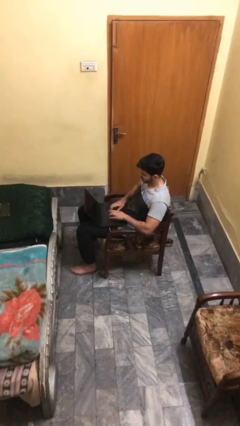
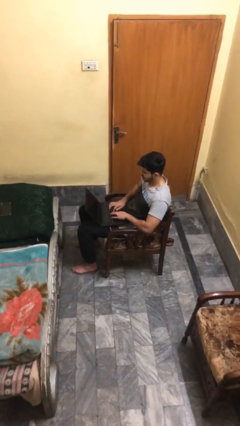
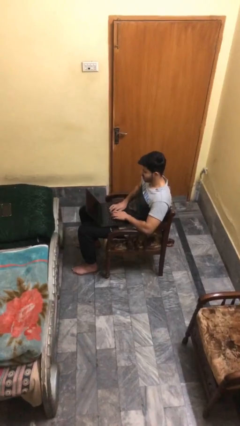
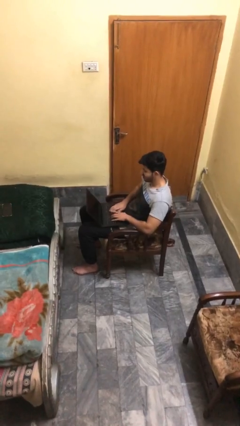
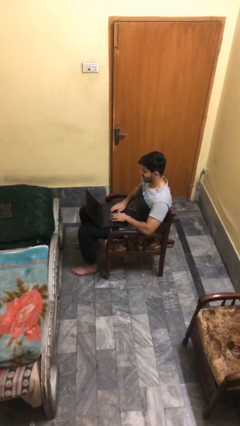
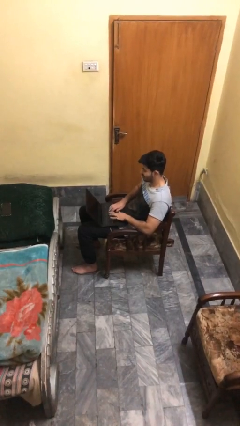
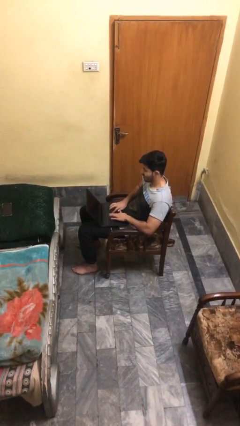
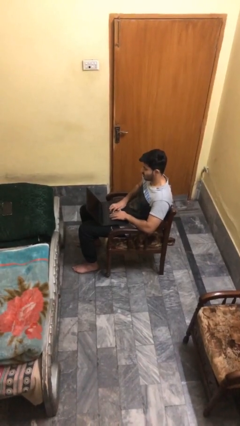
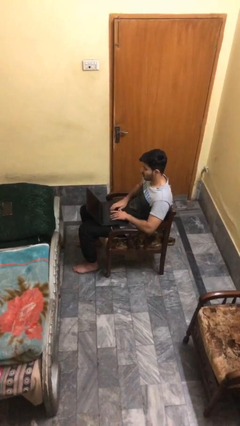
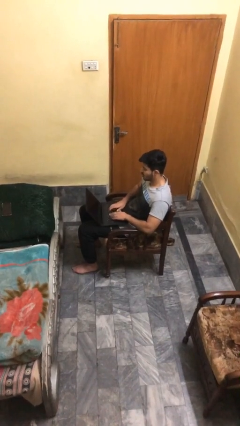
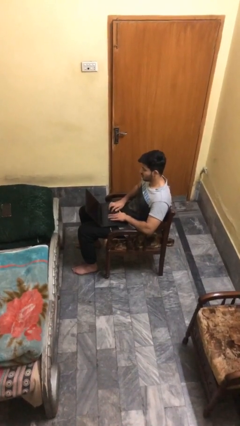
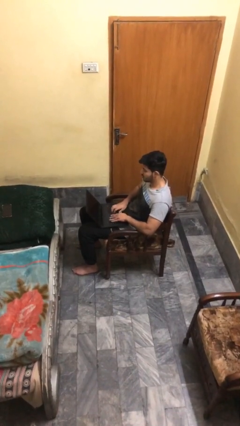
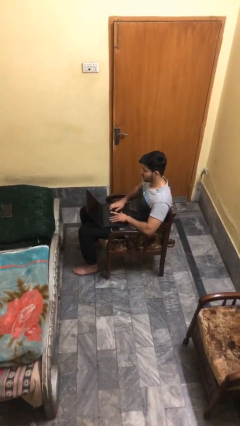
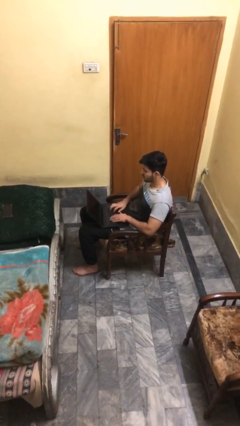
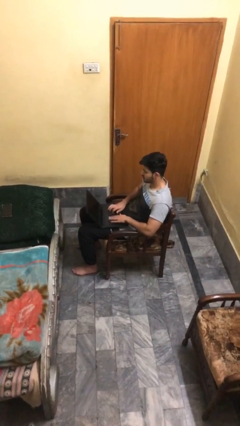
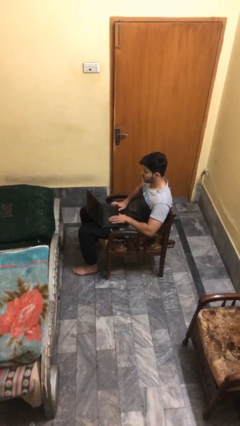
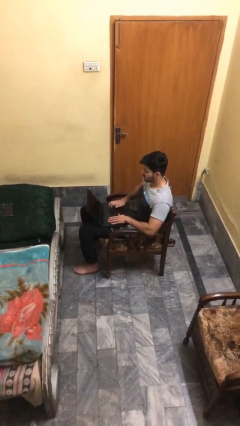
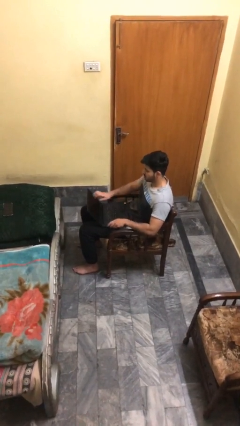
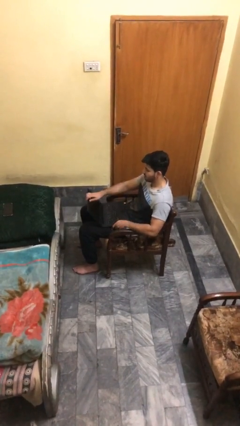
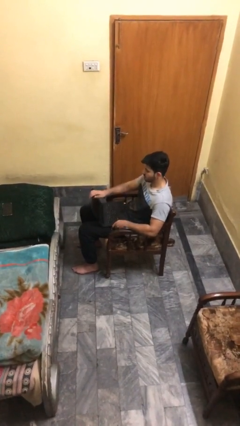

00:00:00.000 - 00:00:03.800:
person interacts with laptop

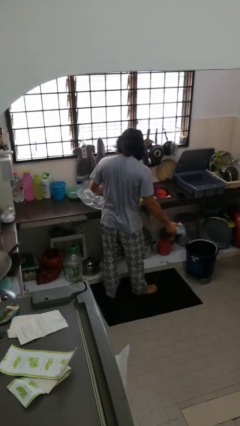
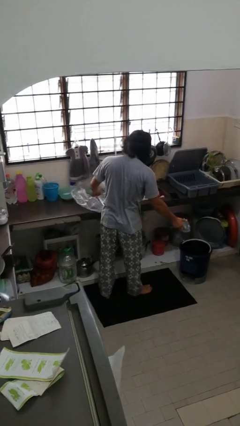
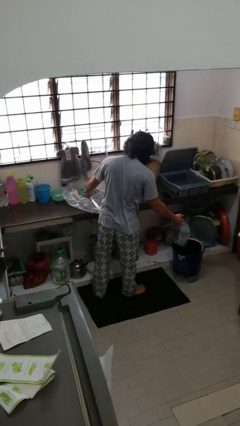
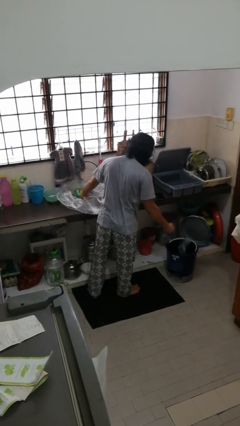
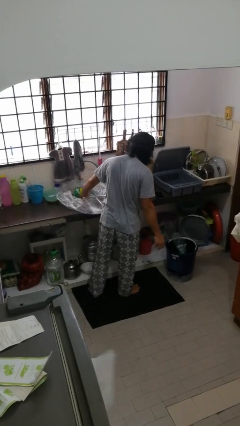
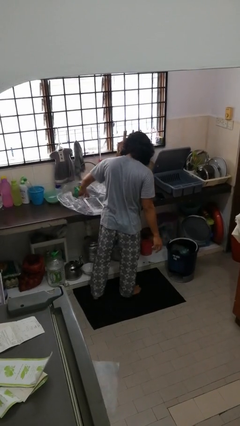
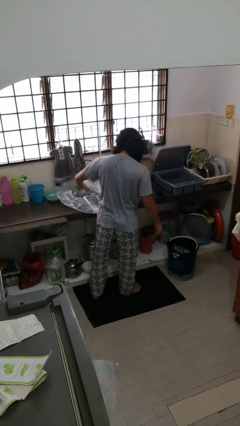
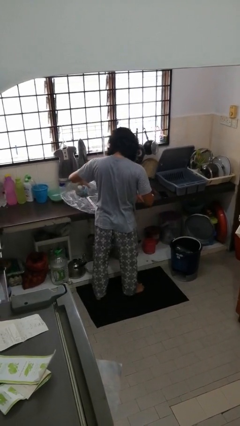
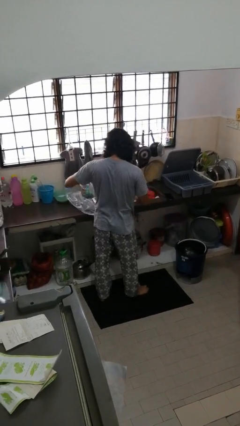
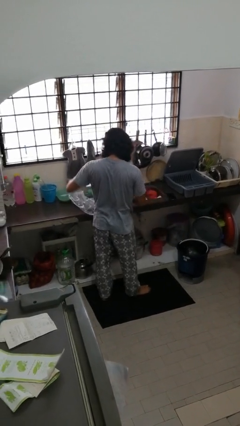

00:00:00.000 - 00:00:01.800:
person discards trash

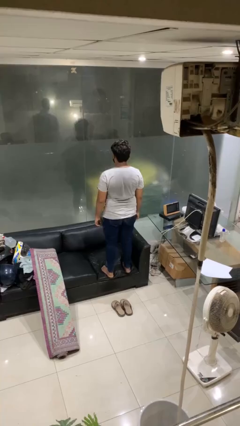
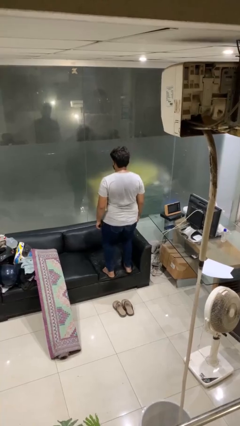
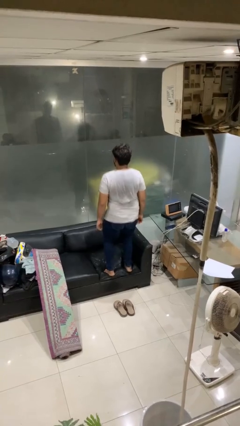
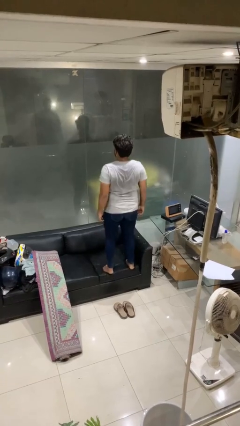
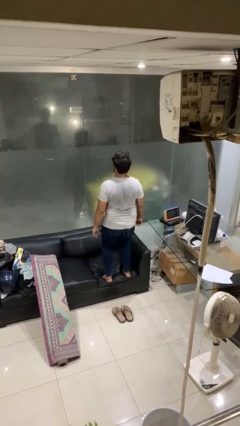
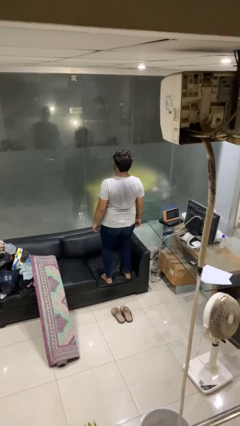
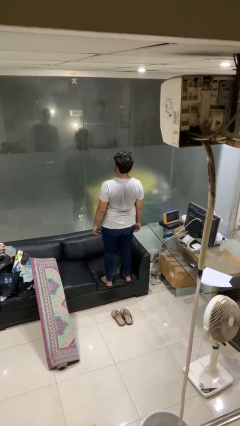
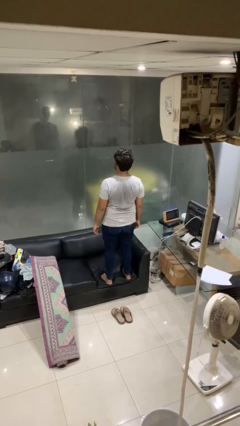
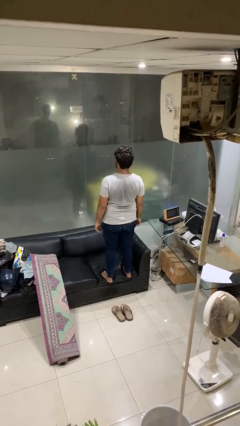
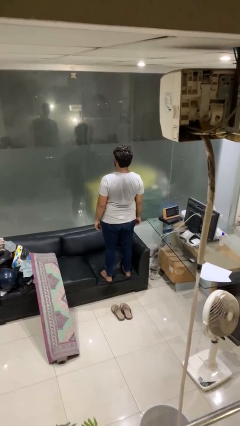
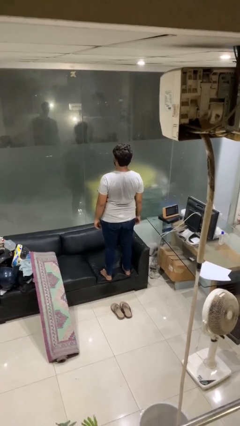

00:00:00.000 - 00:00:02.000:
person jumps on couch

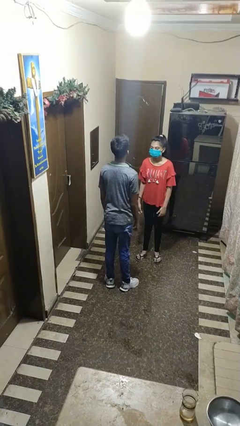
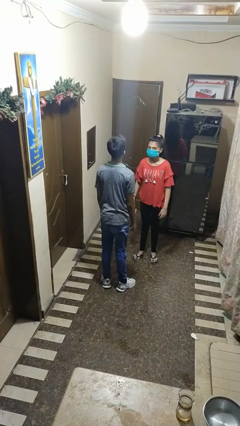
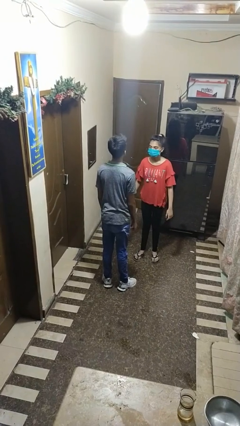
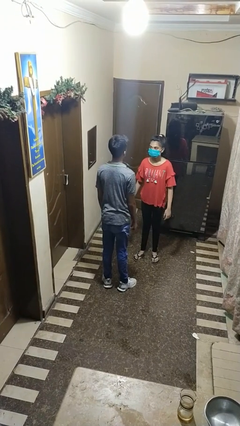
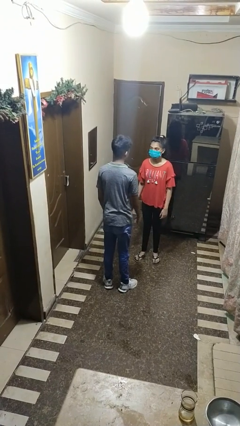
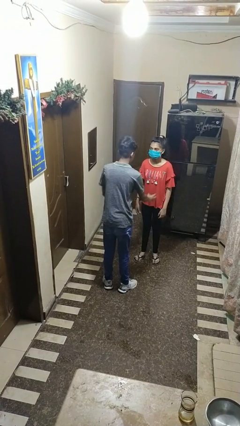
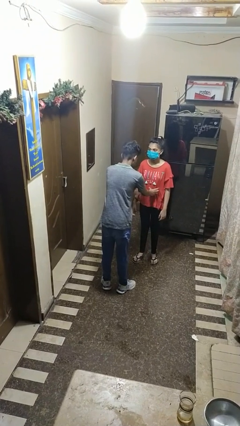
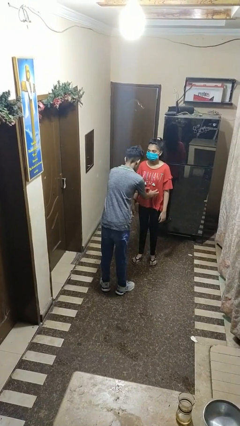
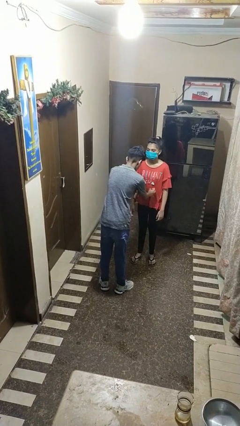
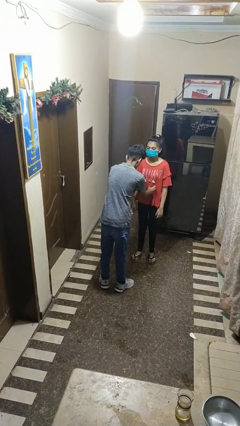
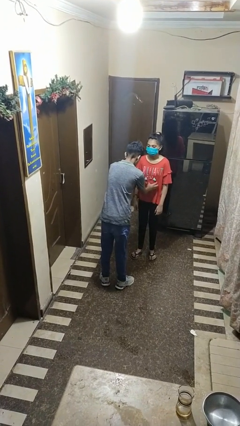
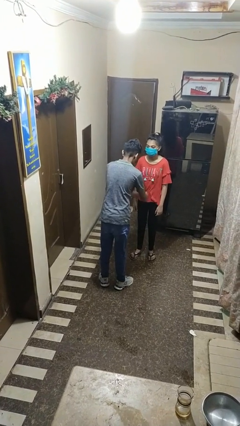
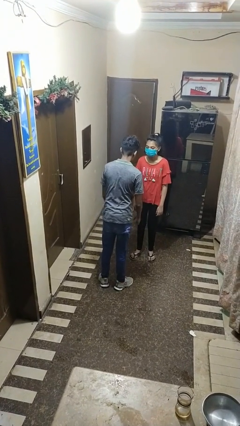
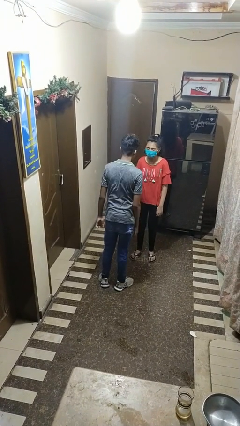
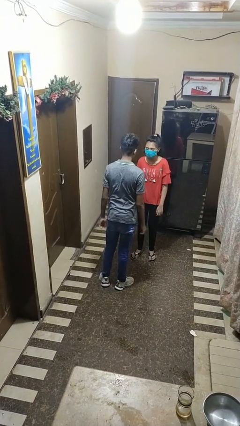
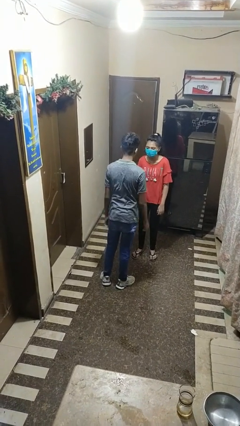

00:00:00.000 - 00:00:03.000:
person tickles person

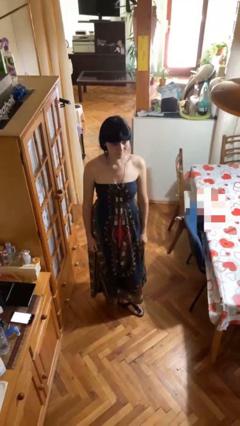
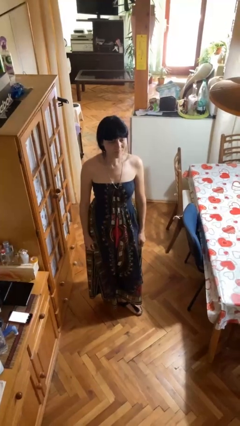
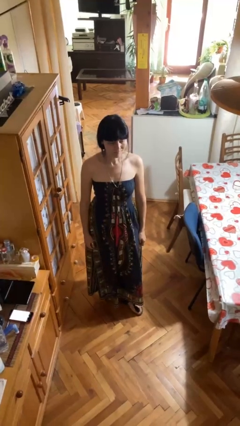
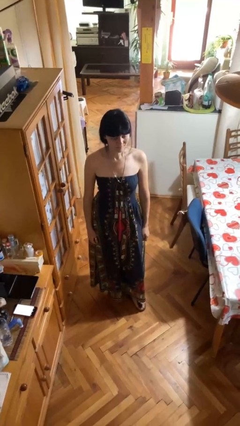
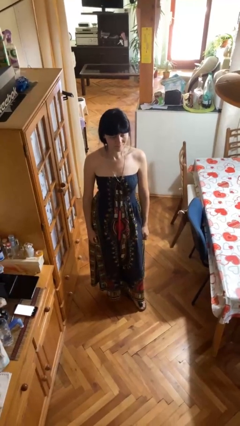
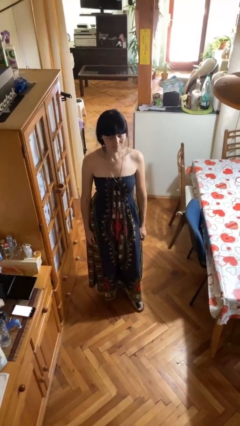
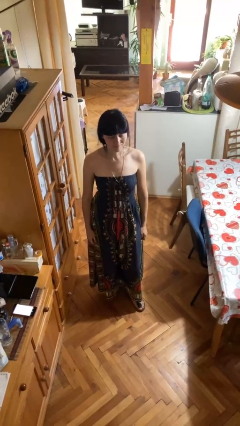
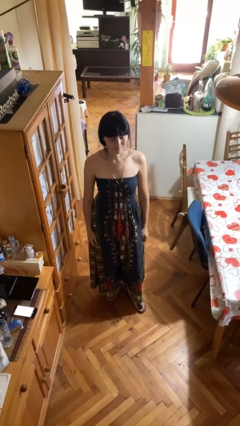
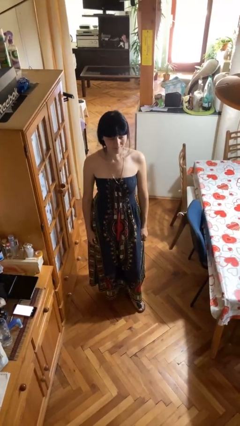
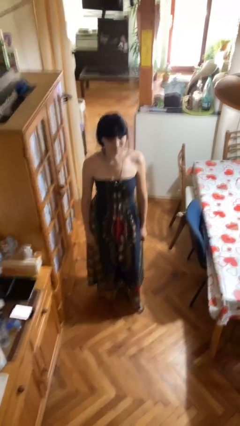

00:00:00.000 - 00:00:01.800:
person nods head

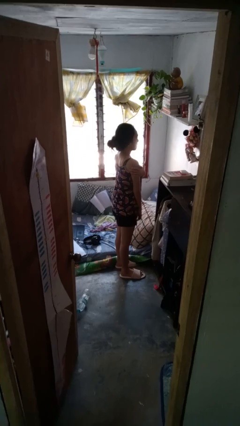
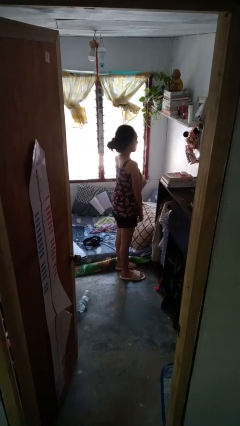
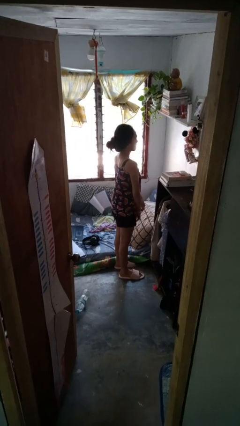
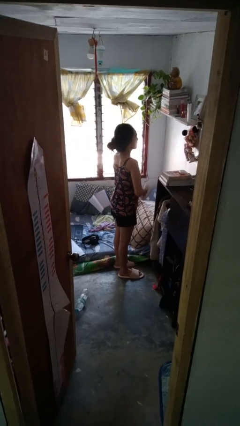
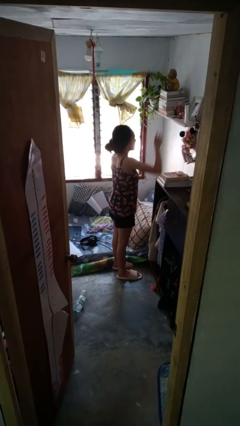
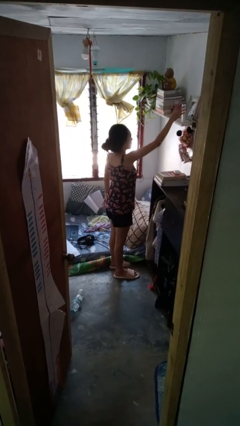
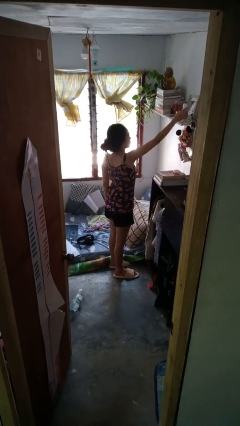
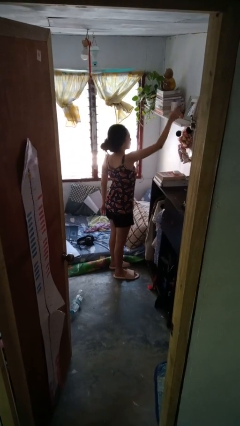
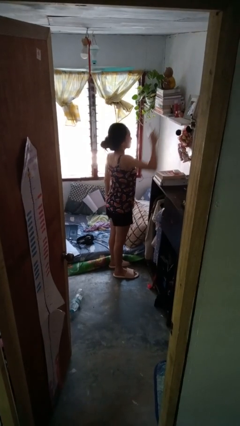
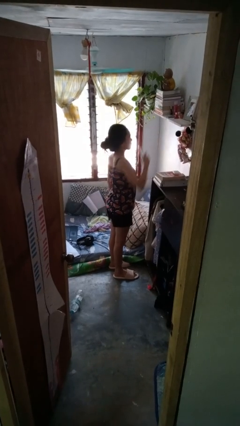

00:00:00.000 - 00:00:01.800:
person picks up object from shelf

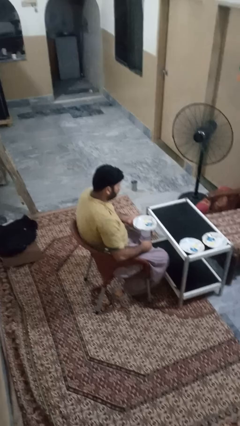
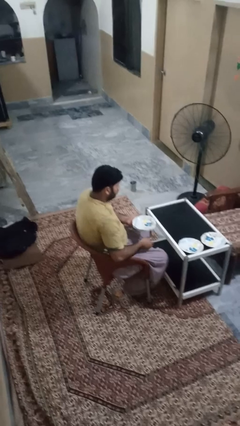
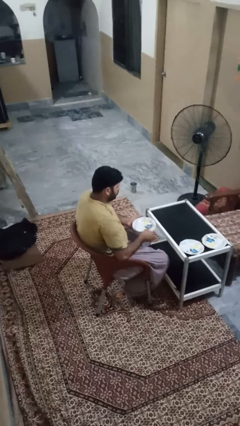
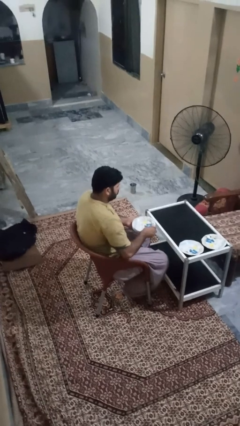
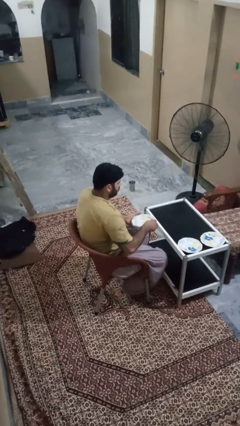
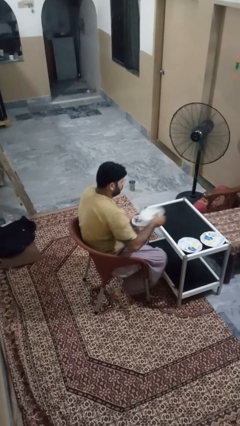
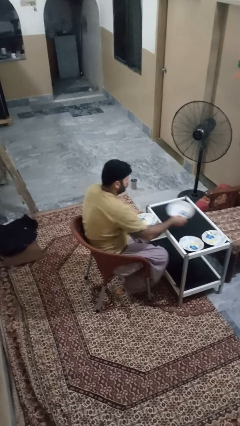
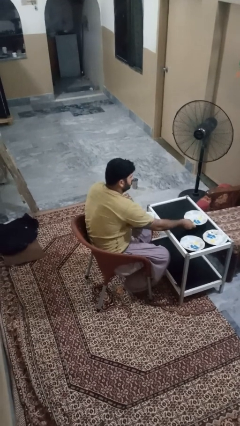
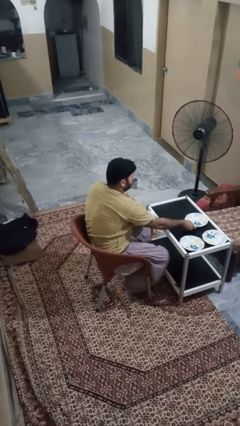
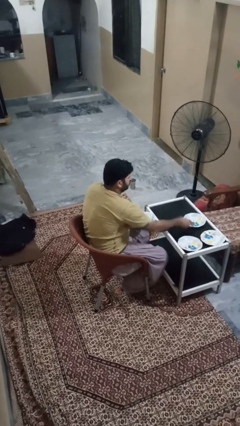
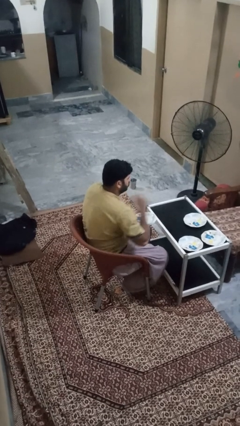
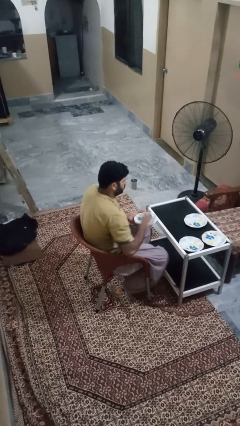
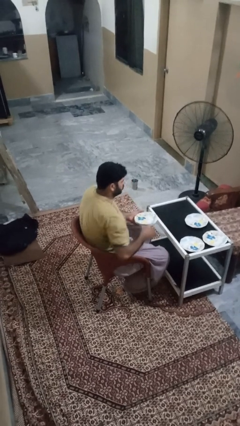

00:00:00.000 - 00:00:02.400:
person sets table

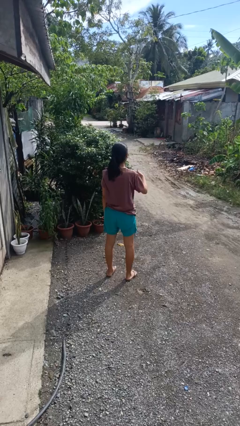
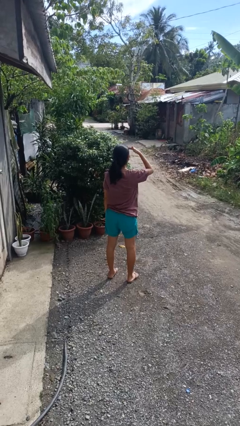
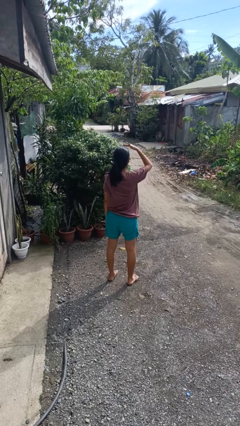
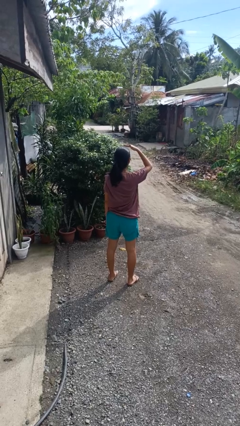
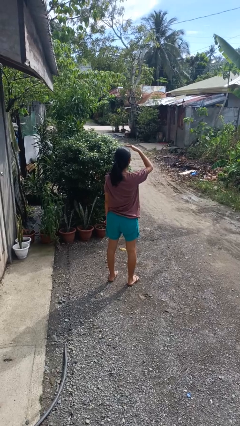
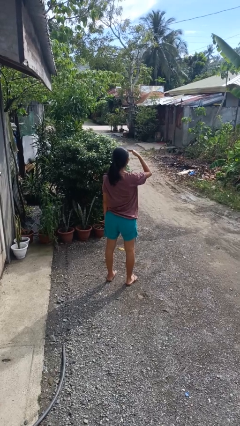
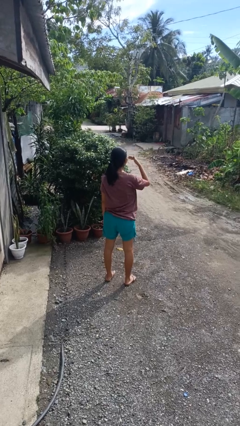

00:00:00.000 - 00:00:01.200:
person shades eyes
